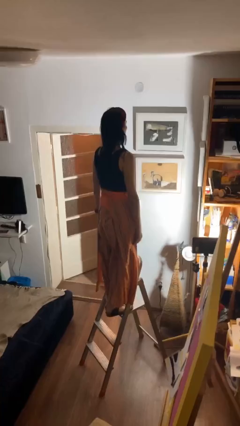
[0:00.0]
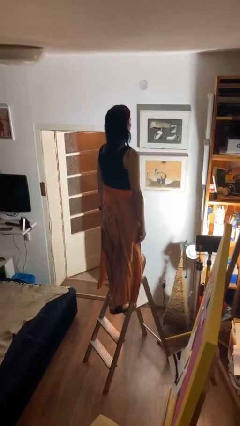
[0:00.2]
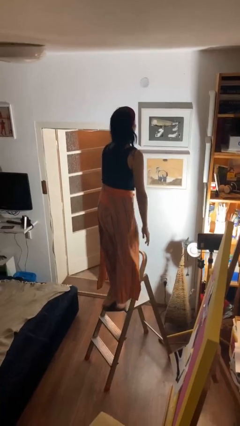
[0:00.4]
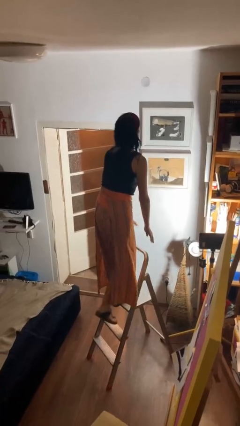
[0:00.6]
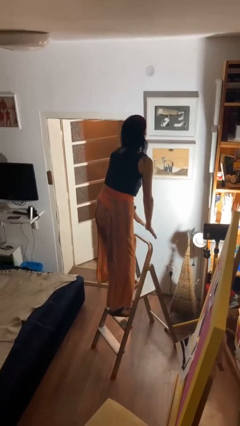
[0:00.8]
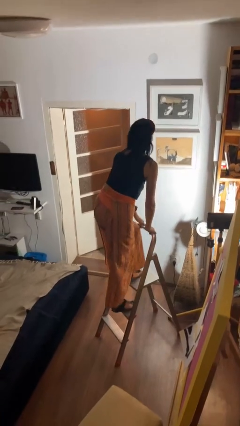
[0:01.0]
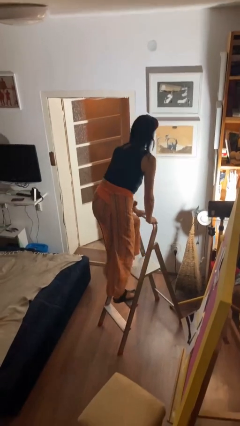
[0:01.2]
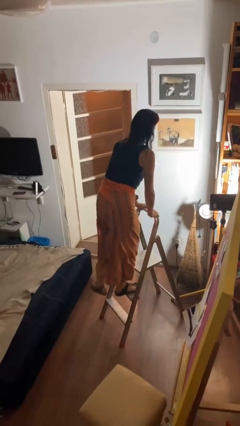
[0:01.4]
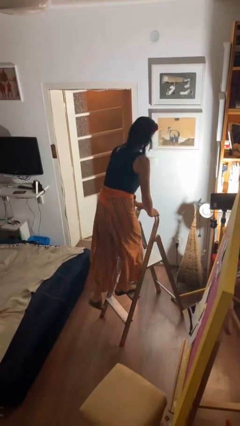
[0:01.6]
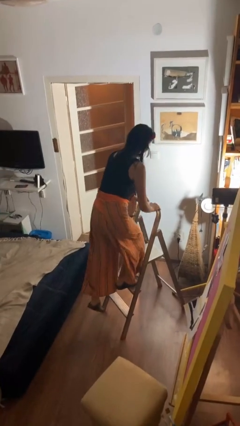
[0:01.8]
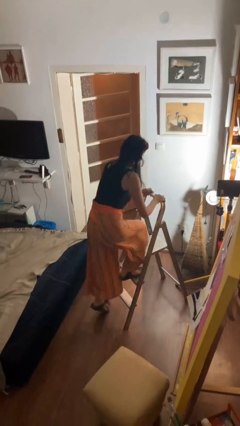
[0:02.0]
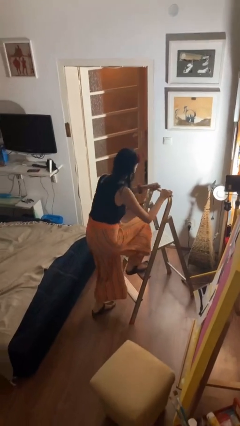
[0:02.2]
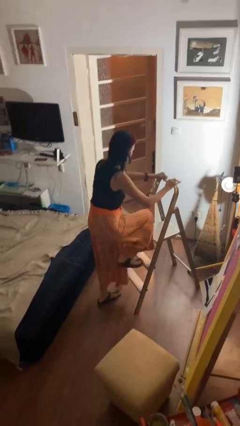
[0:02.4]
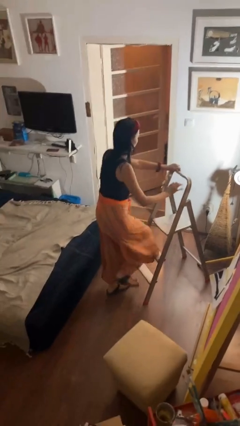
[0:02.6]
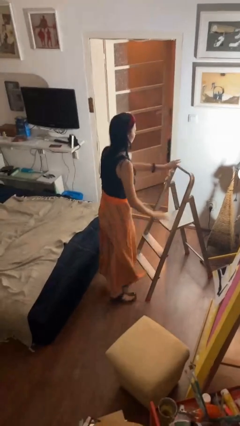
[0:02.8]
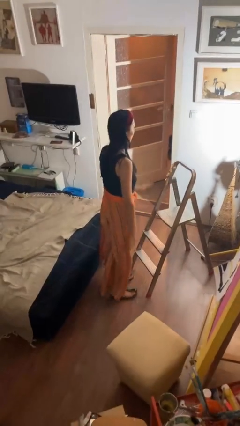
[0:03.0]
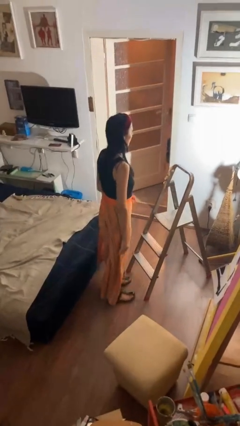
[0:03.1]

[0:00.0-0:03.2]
person climbs down ladder

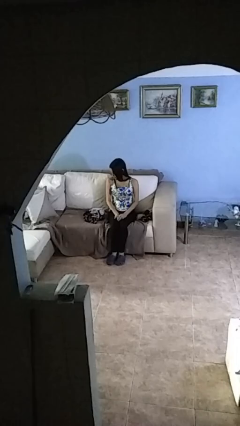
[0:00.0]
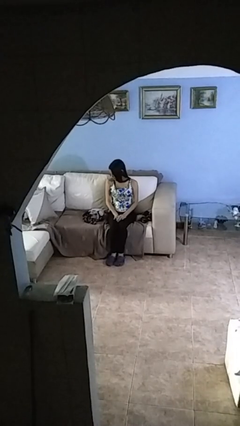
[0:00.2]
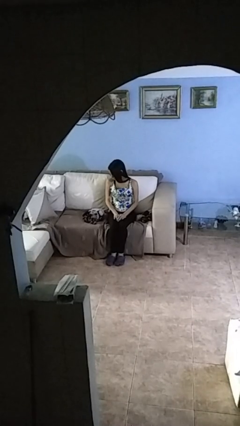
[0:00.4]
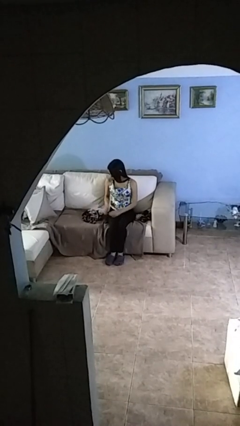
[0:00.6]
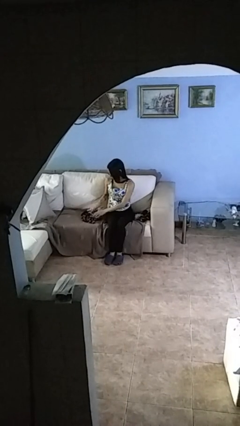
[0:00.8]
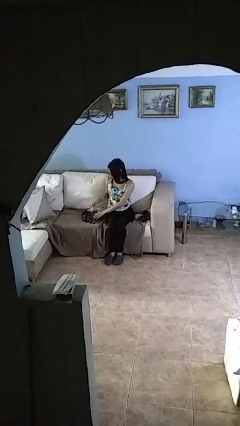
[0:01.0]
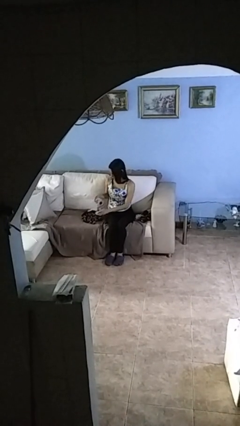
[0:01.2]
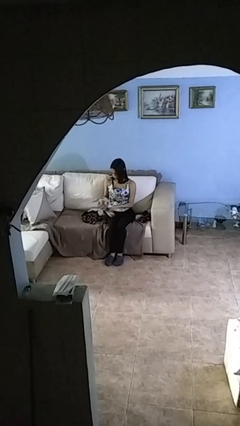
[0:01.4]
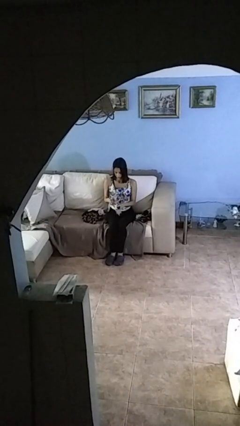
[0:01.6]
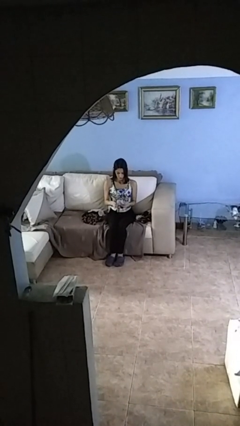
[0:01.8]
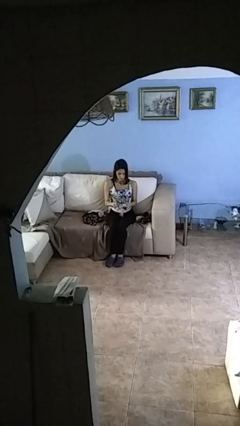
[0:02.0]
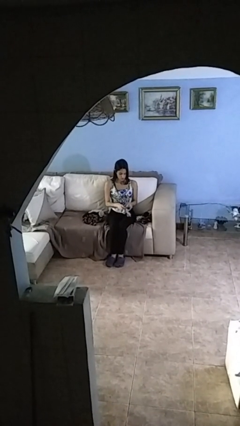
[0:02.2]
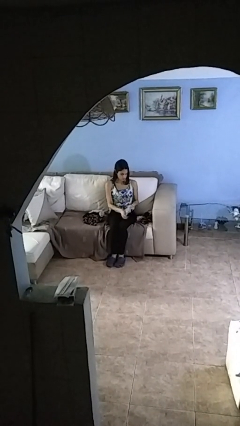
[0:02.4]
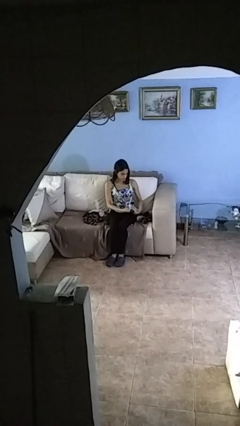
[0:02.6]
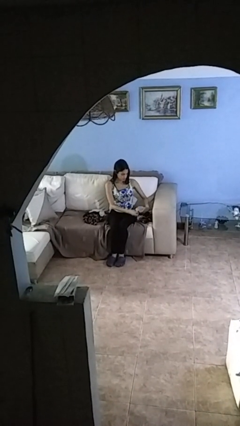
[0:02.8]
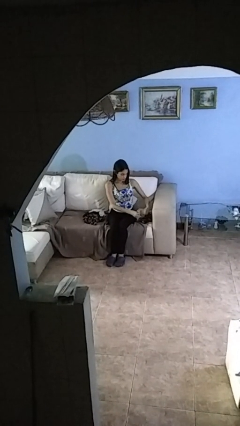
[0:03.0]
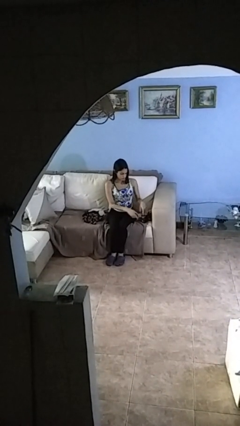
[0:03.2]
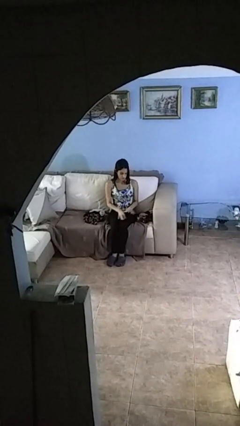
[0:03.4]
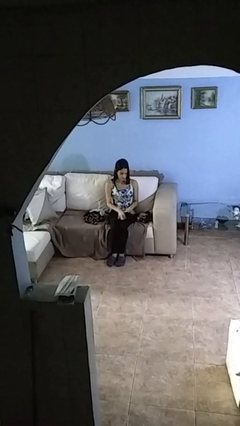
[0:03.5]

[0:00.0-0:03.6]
person folds socks

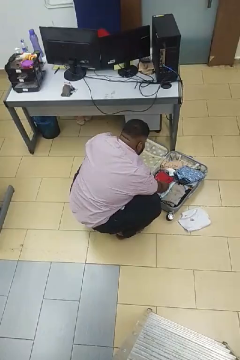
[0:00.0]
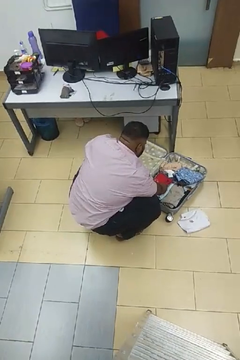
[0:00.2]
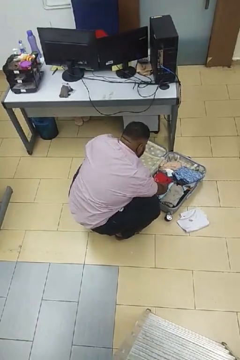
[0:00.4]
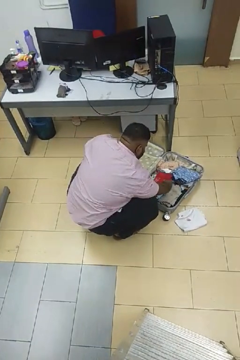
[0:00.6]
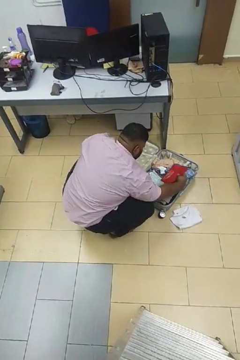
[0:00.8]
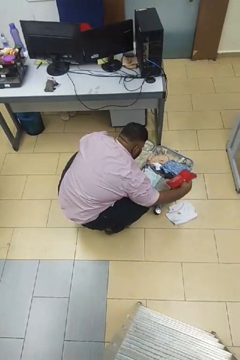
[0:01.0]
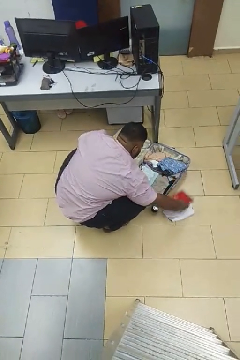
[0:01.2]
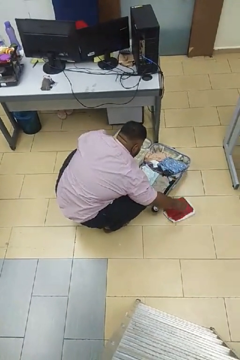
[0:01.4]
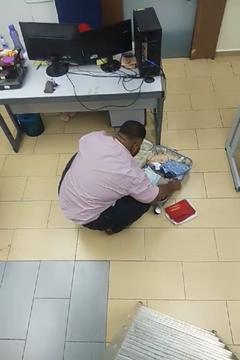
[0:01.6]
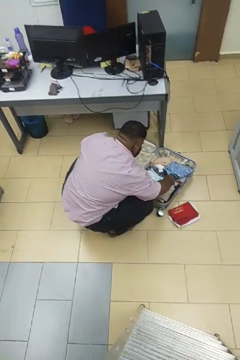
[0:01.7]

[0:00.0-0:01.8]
person unloads clothes from suitcase

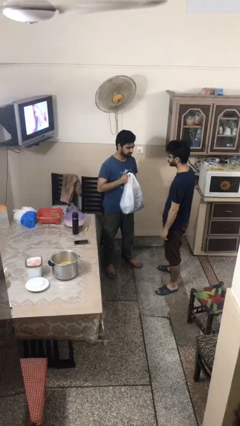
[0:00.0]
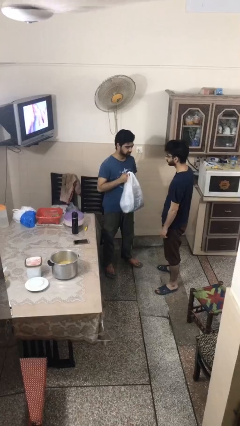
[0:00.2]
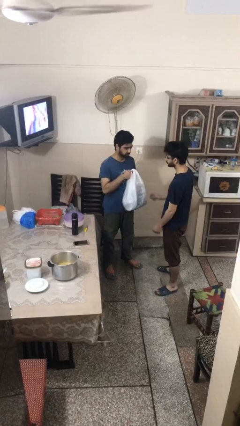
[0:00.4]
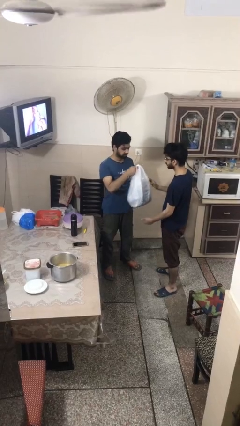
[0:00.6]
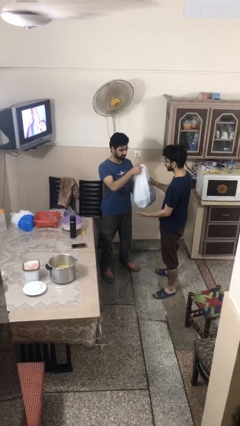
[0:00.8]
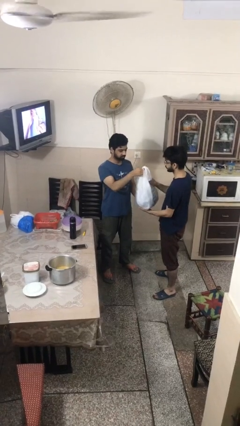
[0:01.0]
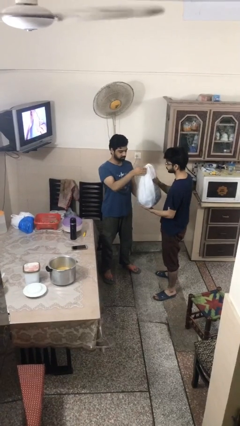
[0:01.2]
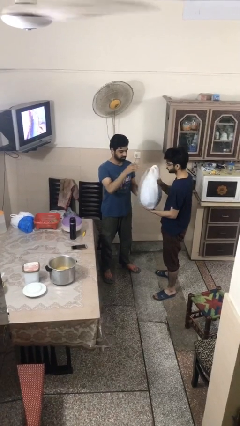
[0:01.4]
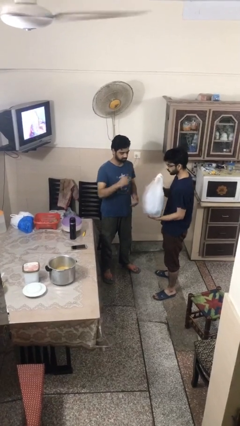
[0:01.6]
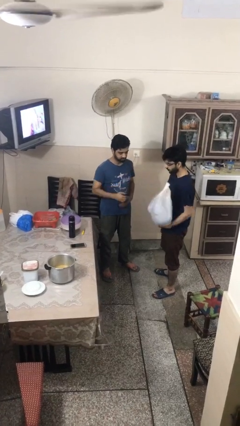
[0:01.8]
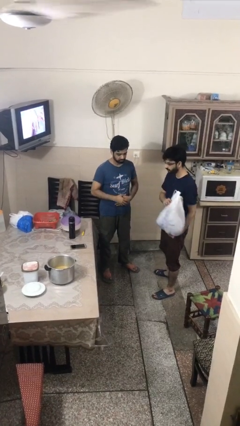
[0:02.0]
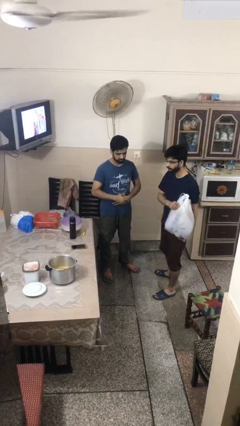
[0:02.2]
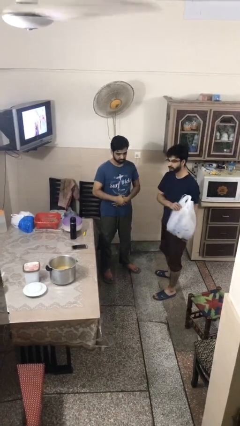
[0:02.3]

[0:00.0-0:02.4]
person transfers object to person

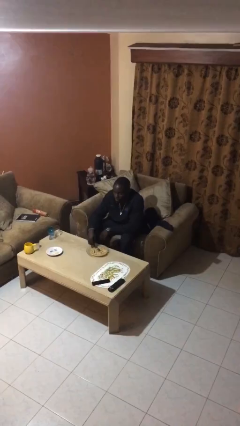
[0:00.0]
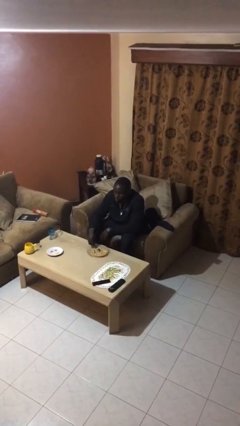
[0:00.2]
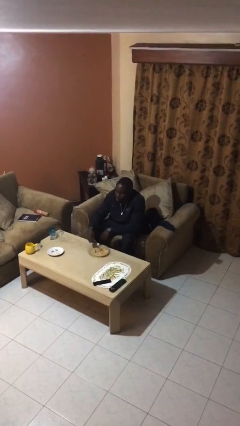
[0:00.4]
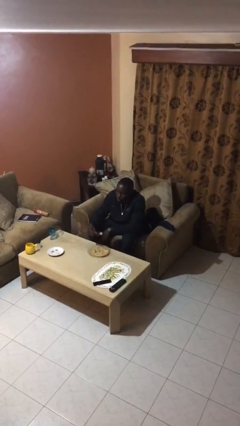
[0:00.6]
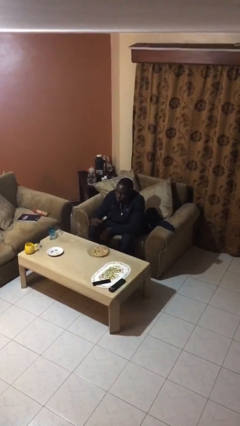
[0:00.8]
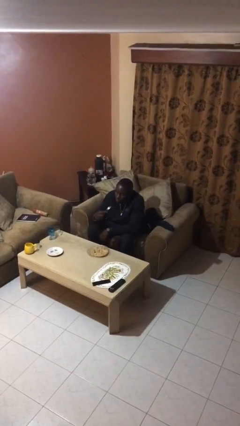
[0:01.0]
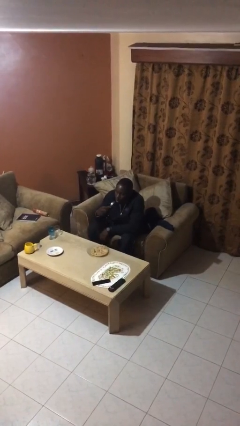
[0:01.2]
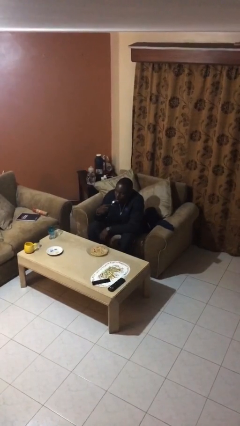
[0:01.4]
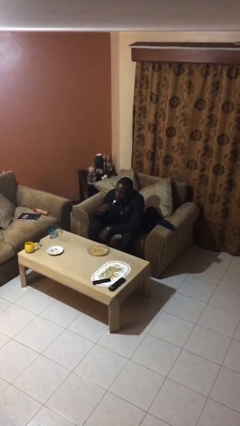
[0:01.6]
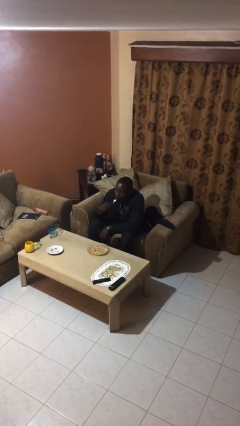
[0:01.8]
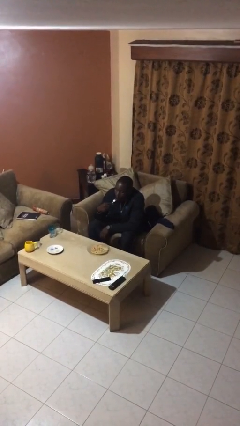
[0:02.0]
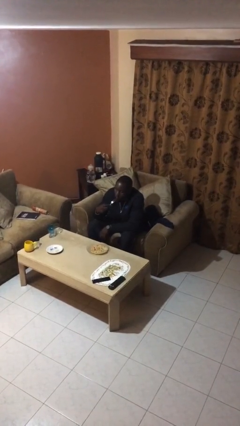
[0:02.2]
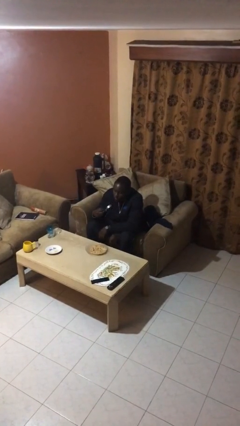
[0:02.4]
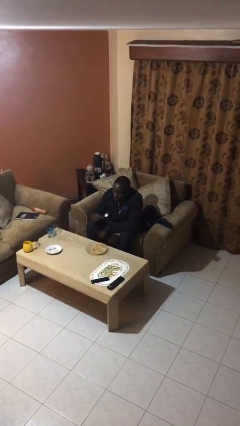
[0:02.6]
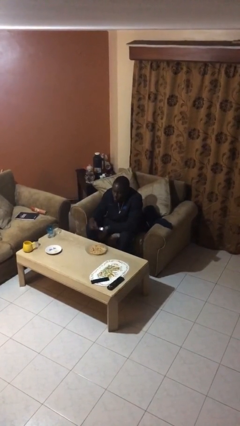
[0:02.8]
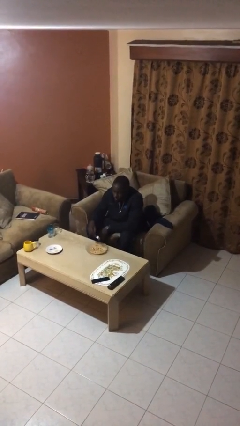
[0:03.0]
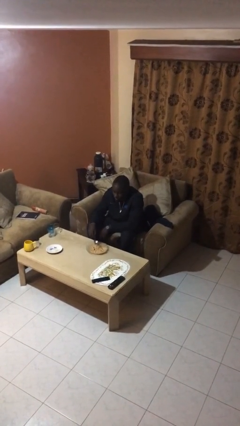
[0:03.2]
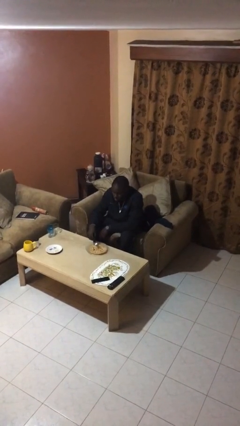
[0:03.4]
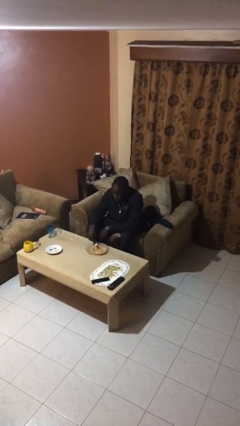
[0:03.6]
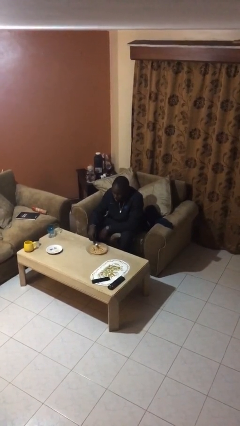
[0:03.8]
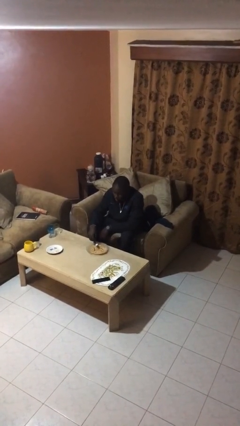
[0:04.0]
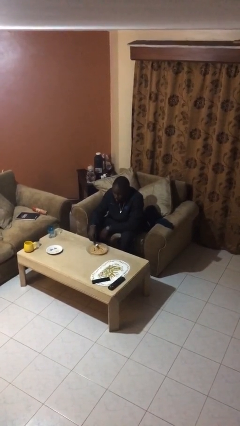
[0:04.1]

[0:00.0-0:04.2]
person eats with utensil
